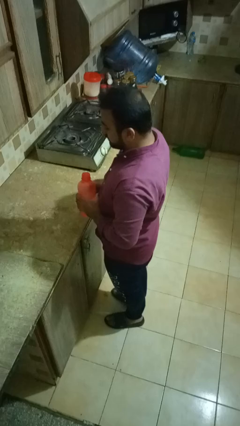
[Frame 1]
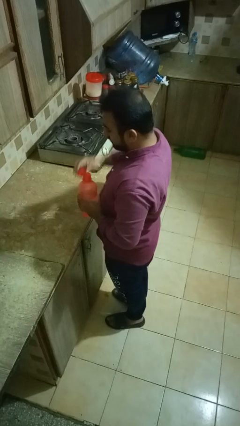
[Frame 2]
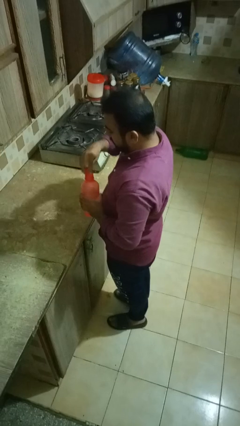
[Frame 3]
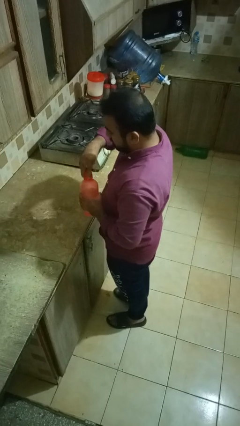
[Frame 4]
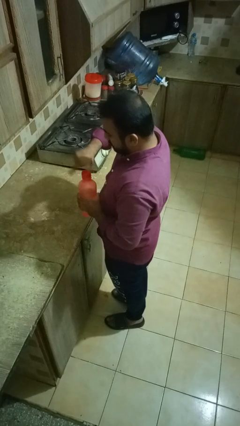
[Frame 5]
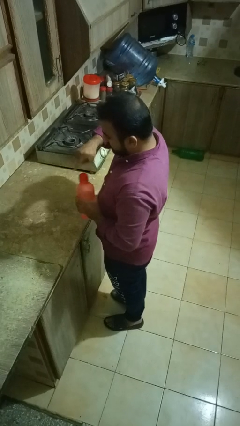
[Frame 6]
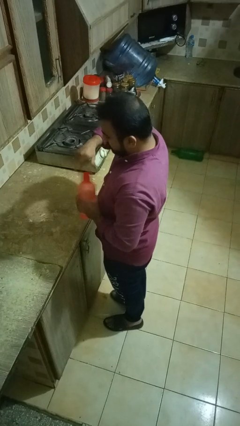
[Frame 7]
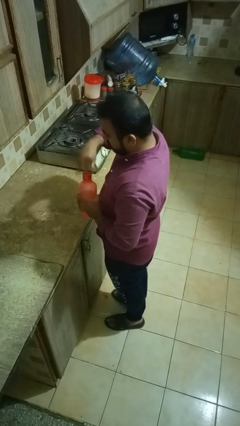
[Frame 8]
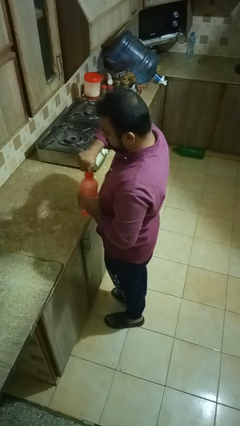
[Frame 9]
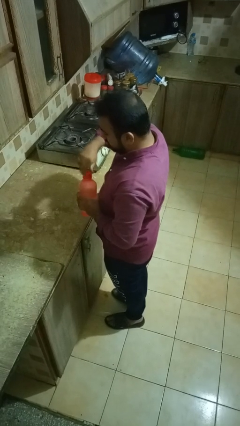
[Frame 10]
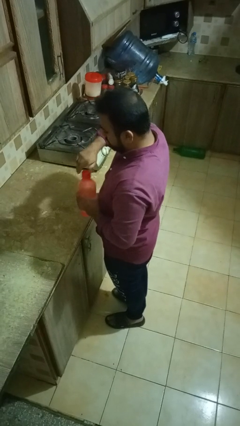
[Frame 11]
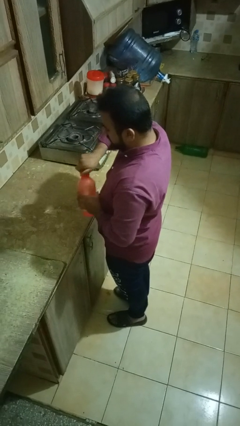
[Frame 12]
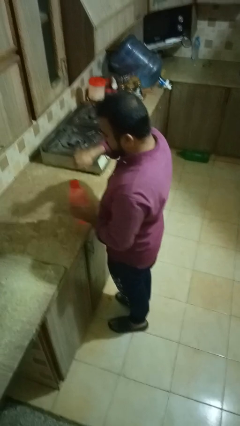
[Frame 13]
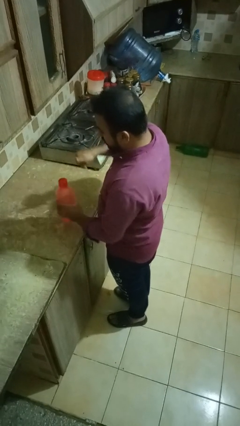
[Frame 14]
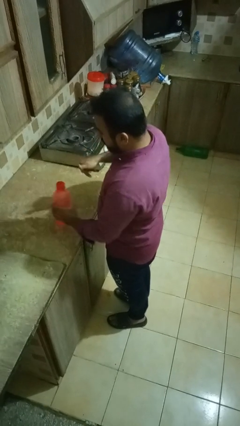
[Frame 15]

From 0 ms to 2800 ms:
person screws lid to bottle
